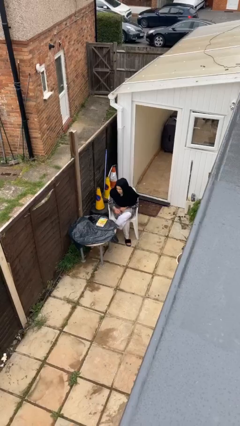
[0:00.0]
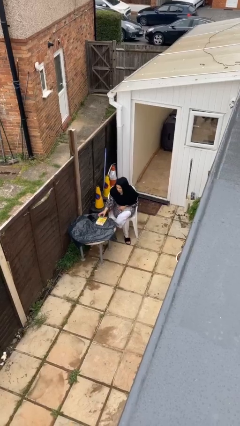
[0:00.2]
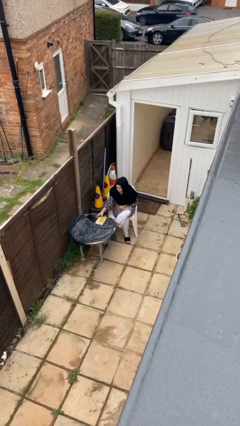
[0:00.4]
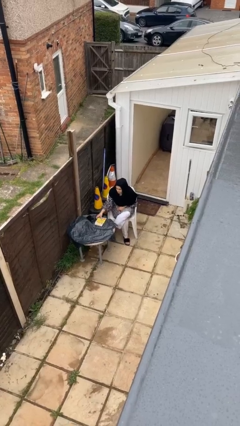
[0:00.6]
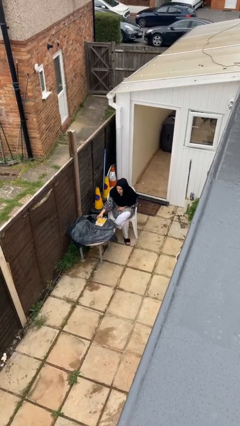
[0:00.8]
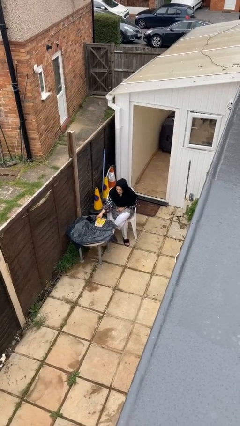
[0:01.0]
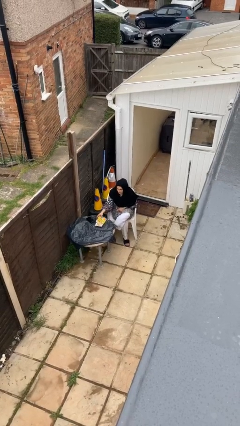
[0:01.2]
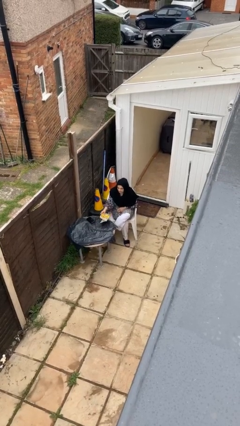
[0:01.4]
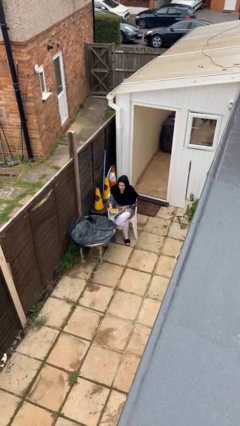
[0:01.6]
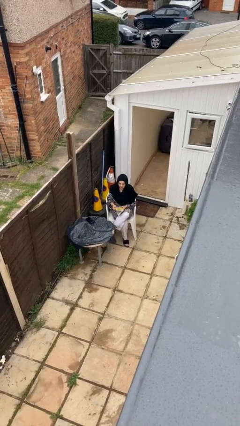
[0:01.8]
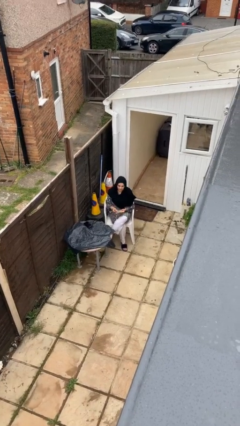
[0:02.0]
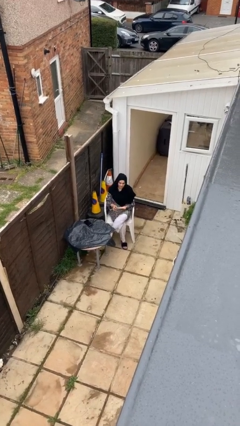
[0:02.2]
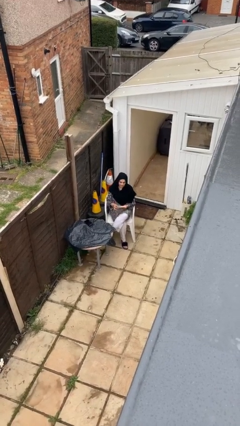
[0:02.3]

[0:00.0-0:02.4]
person picks up object from table

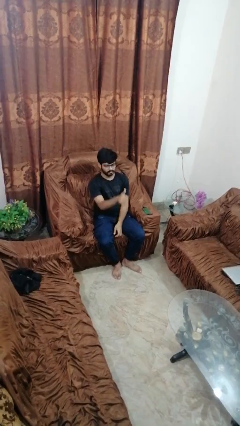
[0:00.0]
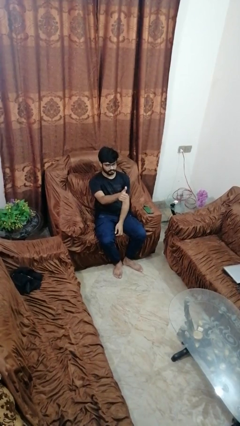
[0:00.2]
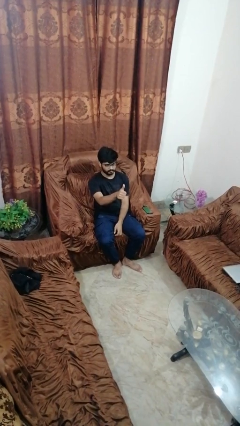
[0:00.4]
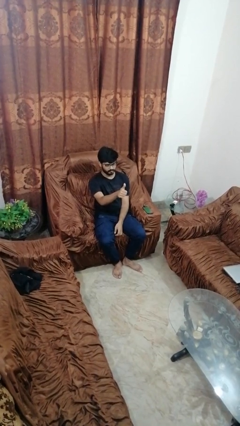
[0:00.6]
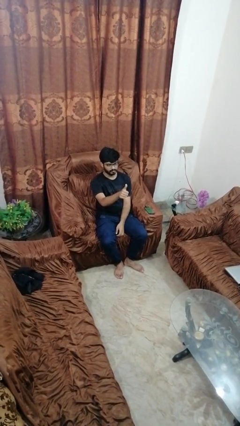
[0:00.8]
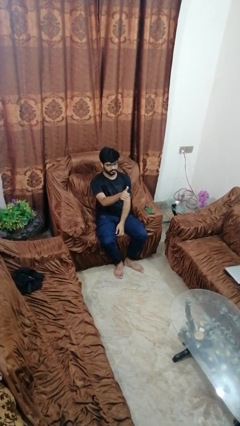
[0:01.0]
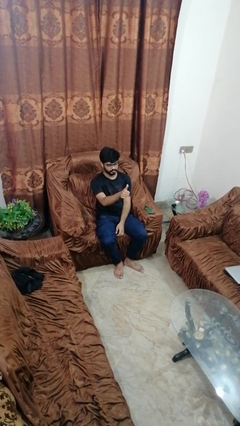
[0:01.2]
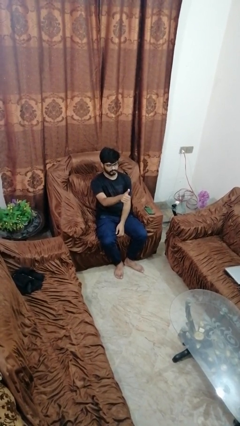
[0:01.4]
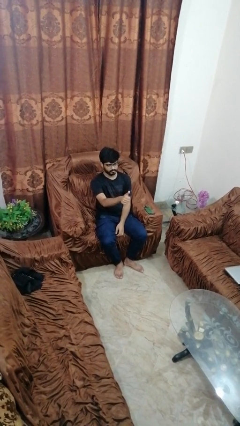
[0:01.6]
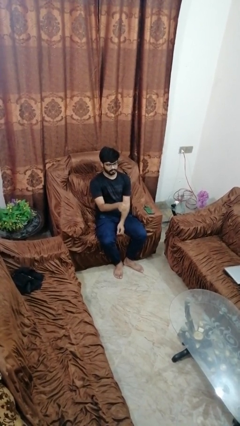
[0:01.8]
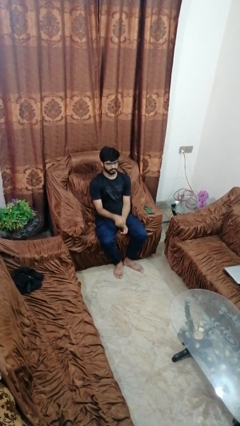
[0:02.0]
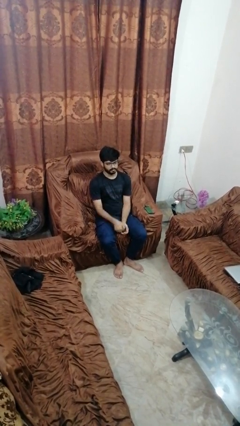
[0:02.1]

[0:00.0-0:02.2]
person gestures thumbs up

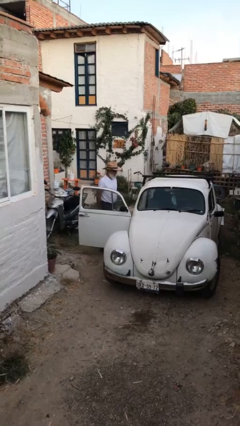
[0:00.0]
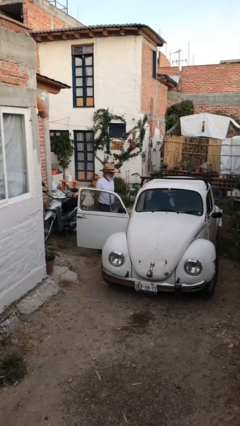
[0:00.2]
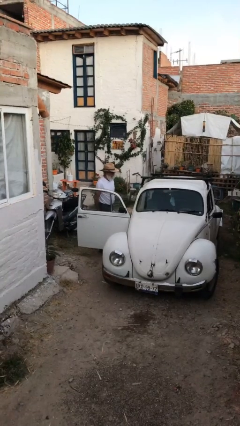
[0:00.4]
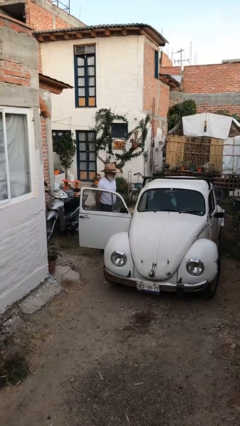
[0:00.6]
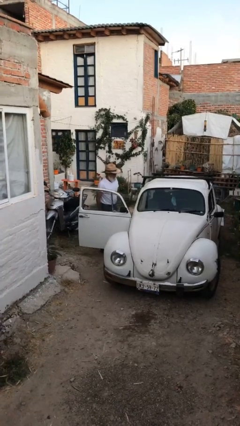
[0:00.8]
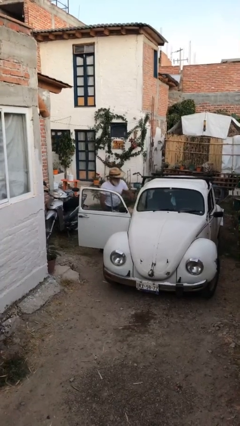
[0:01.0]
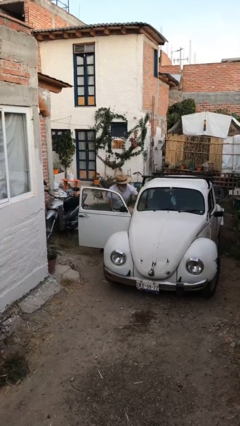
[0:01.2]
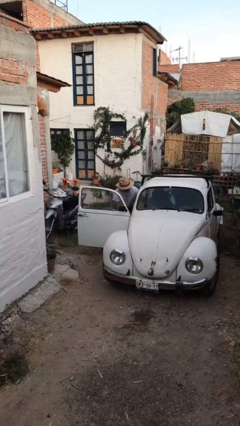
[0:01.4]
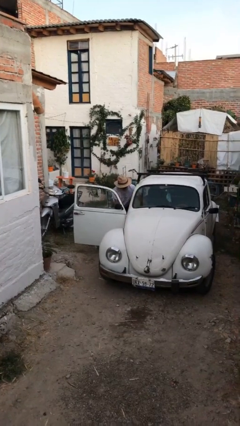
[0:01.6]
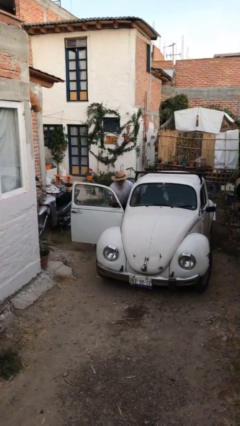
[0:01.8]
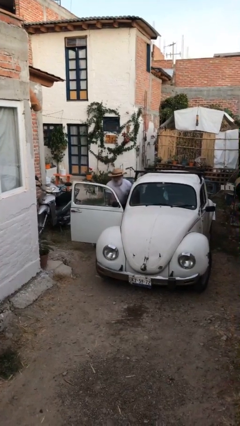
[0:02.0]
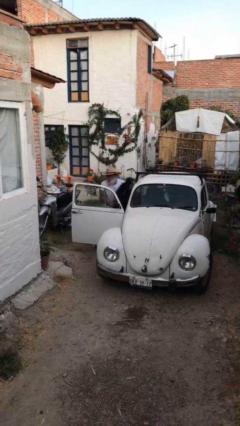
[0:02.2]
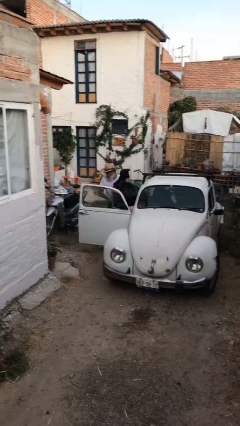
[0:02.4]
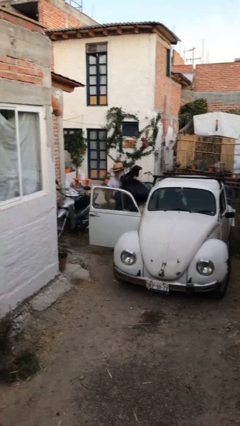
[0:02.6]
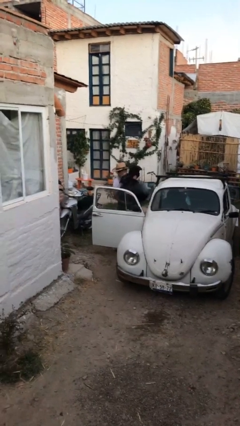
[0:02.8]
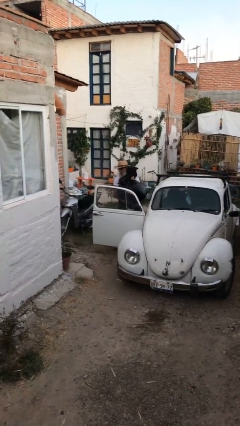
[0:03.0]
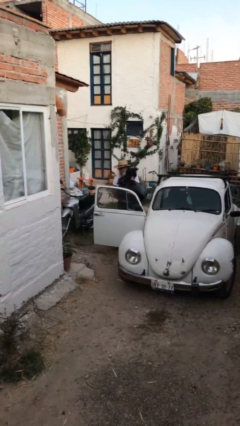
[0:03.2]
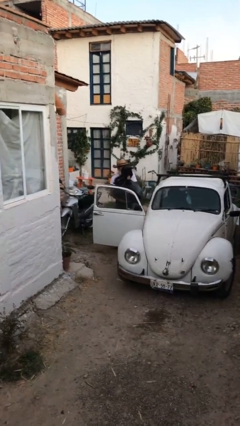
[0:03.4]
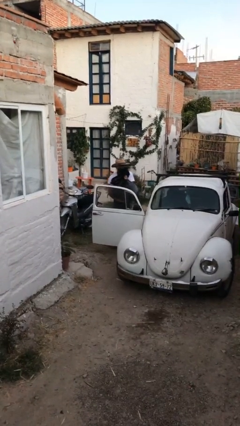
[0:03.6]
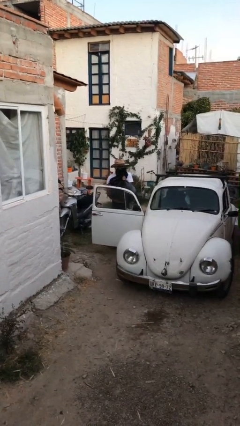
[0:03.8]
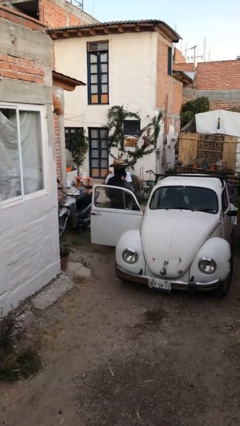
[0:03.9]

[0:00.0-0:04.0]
person unloads car

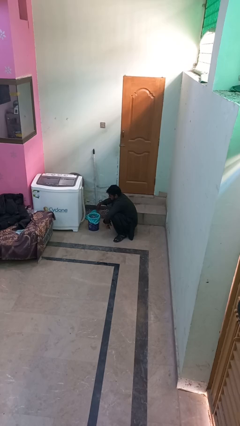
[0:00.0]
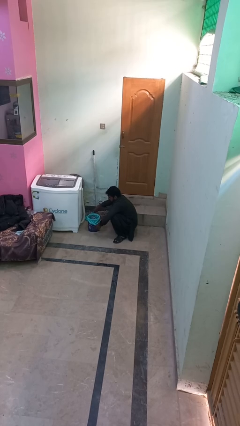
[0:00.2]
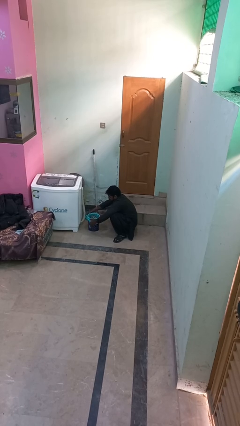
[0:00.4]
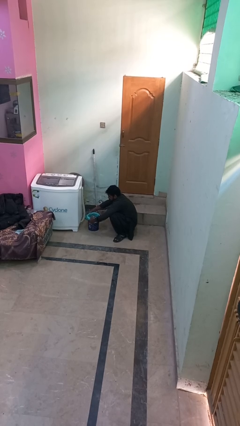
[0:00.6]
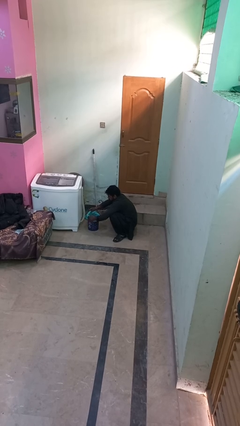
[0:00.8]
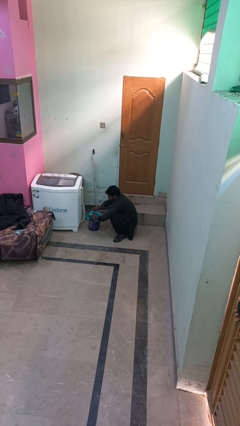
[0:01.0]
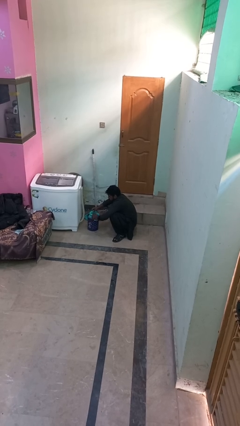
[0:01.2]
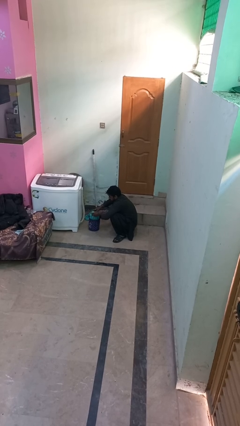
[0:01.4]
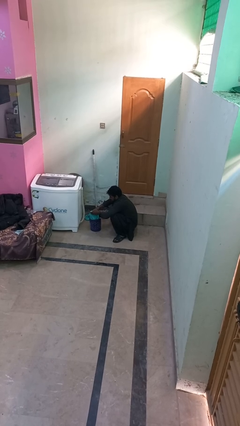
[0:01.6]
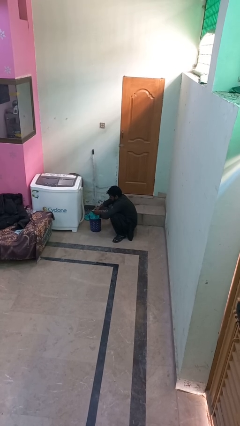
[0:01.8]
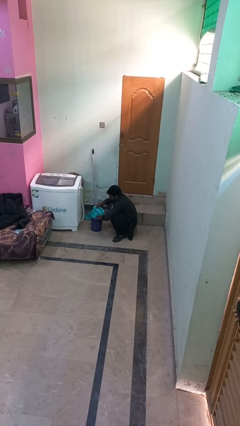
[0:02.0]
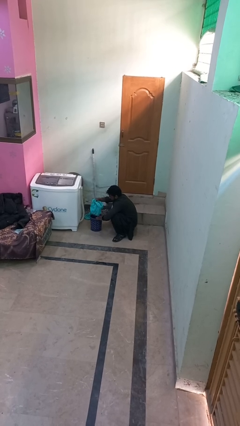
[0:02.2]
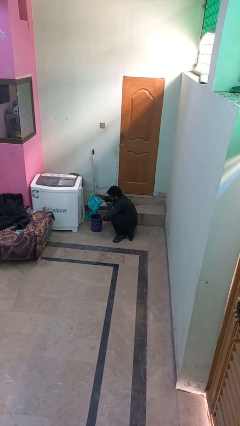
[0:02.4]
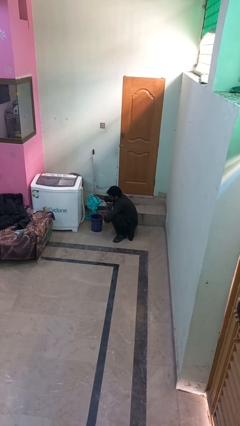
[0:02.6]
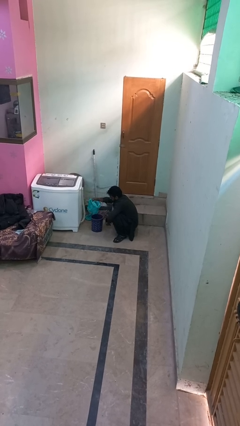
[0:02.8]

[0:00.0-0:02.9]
person removes trashbag from trashcan

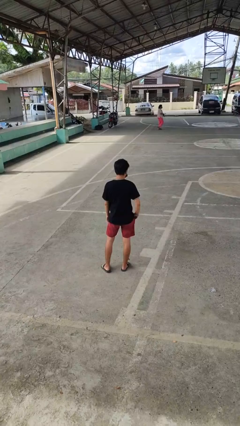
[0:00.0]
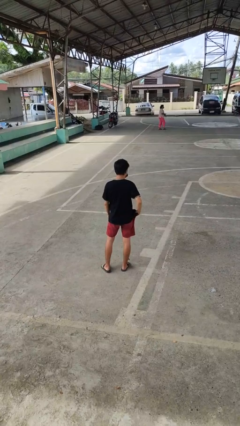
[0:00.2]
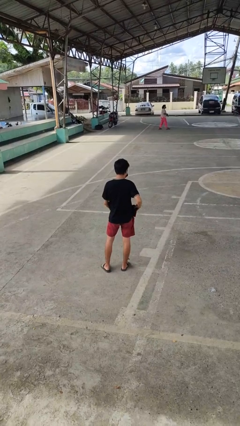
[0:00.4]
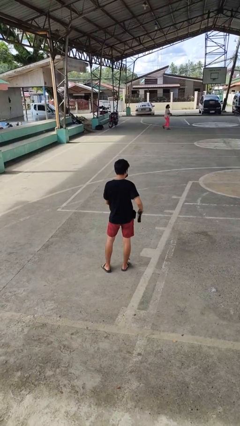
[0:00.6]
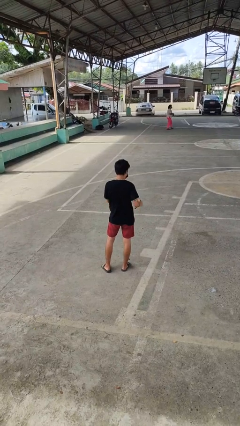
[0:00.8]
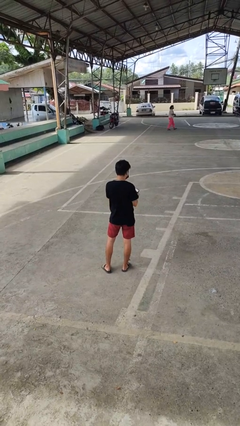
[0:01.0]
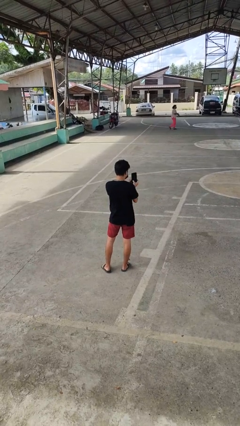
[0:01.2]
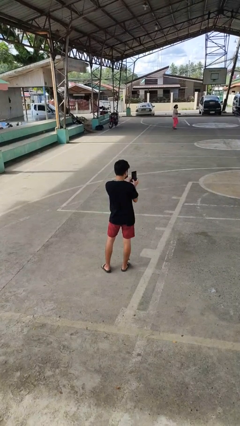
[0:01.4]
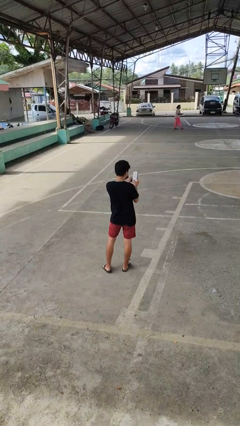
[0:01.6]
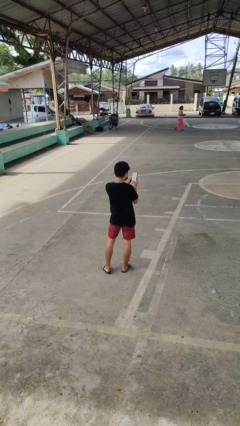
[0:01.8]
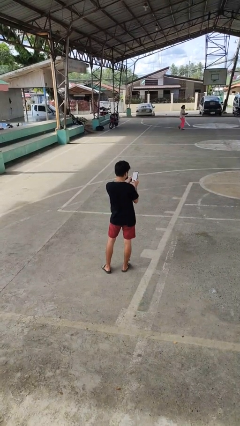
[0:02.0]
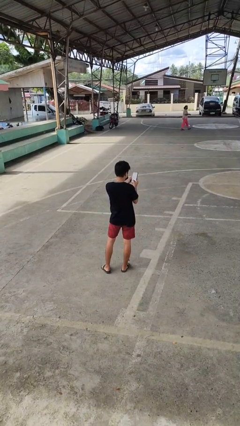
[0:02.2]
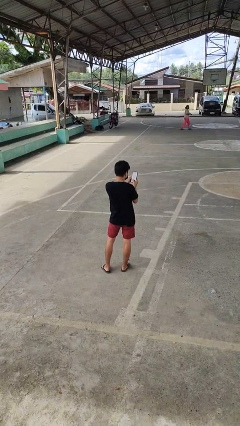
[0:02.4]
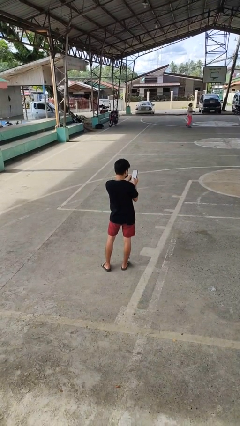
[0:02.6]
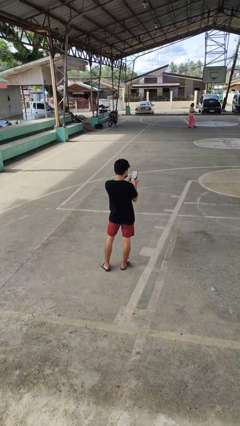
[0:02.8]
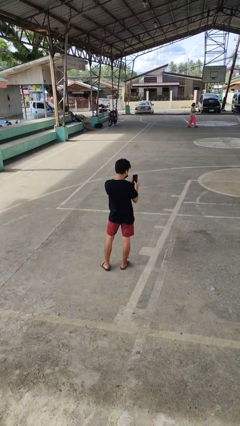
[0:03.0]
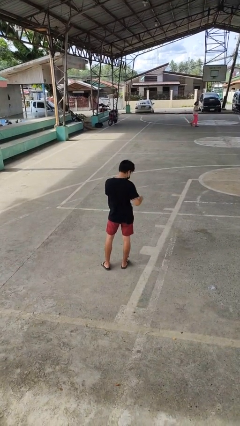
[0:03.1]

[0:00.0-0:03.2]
person takes phone from pocket

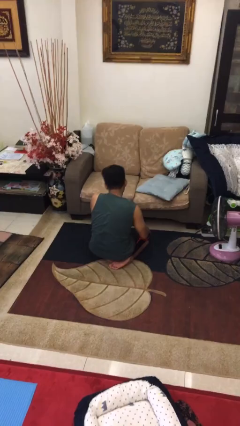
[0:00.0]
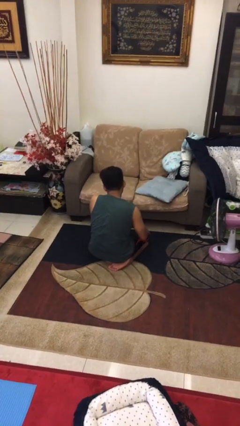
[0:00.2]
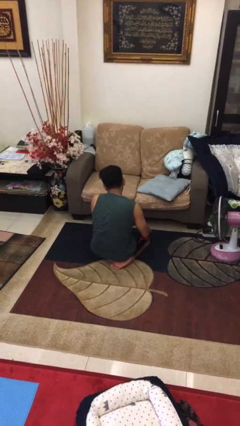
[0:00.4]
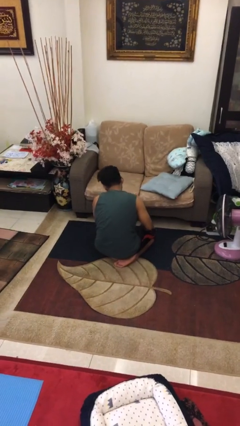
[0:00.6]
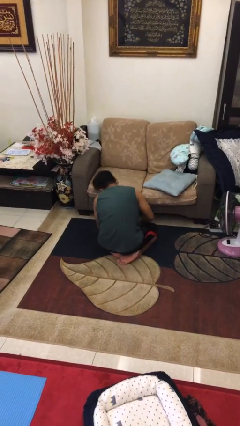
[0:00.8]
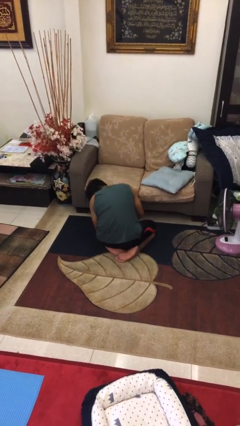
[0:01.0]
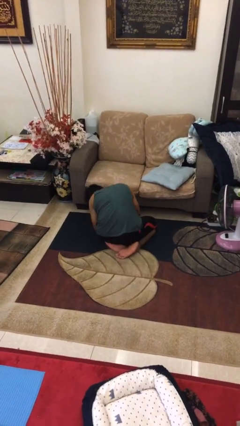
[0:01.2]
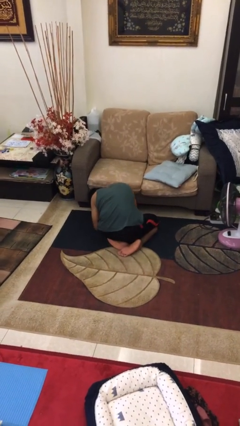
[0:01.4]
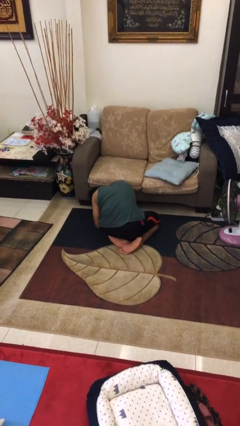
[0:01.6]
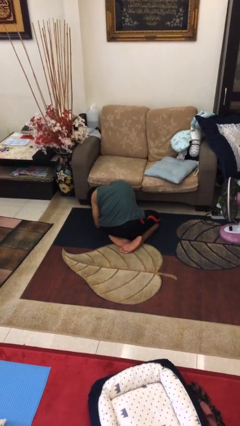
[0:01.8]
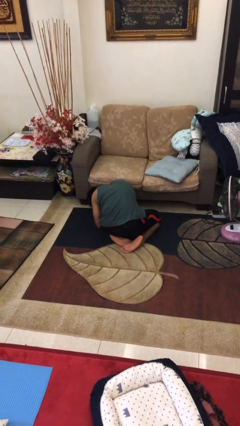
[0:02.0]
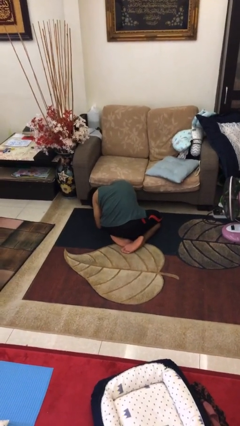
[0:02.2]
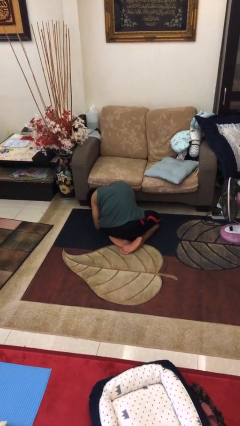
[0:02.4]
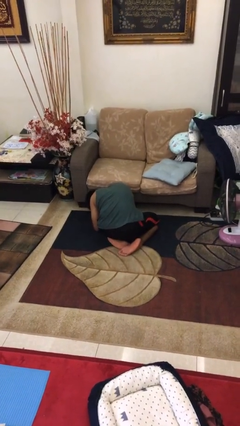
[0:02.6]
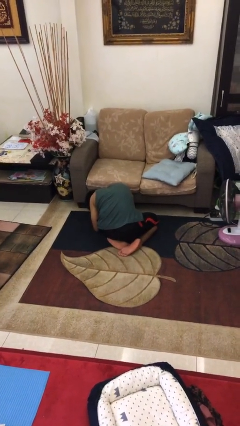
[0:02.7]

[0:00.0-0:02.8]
person searches under couch
